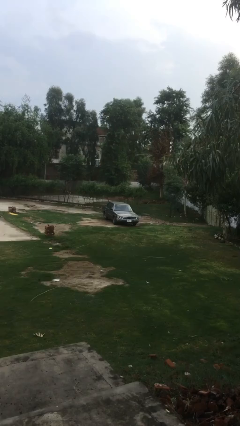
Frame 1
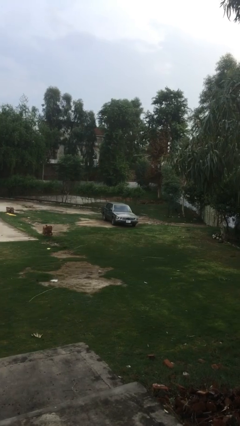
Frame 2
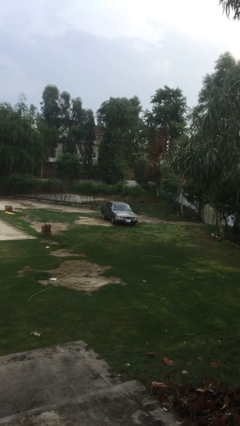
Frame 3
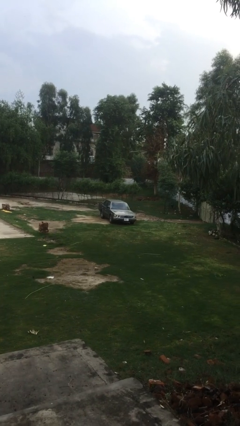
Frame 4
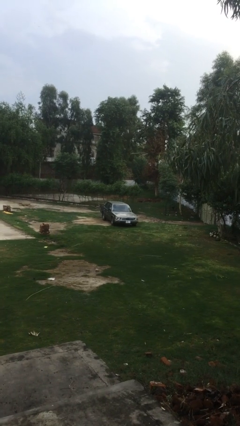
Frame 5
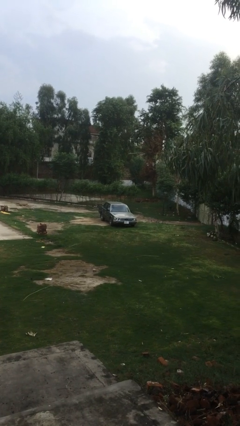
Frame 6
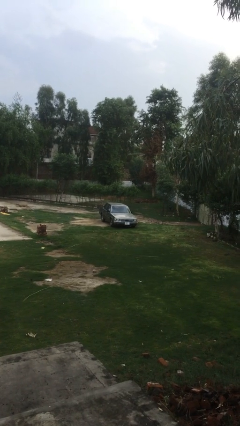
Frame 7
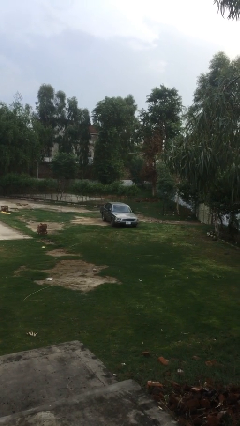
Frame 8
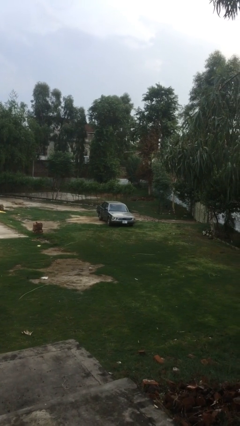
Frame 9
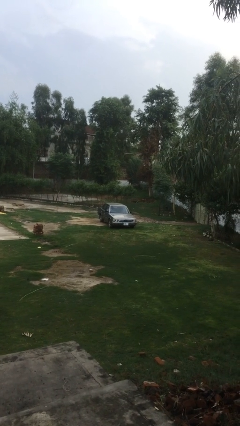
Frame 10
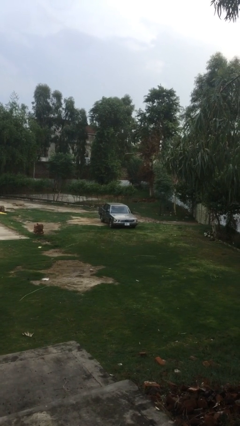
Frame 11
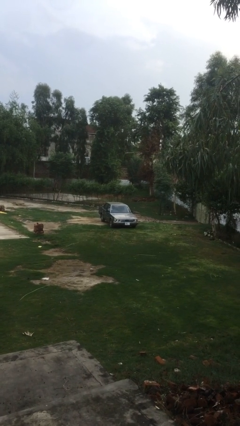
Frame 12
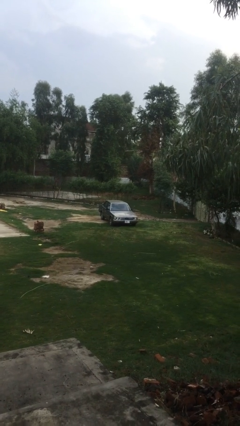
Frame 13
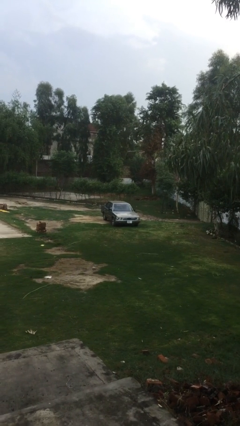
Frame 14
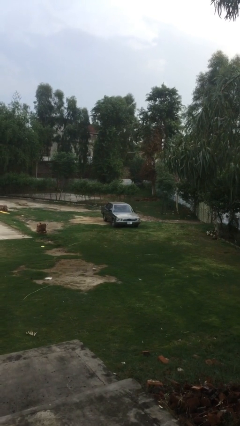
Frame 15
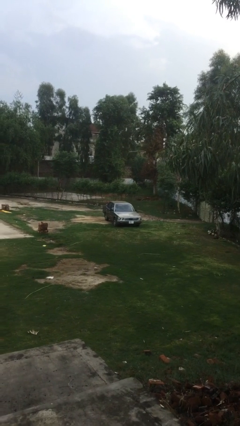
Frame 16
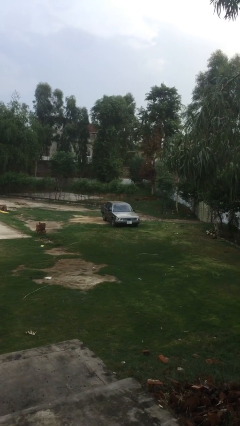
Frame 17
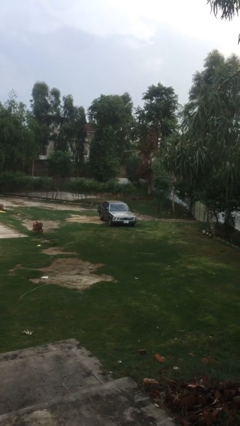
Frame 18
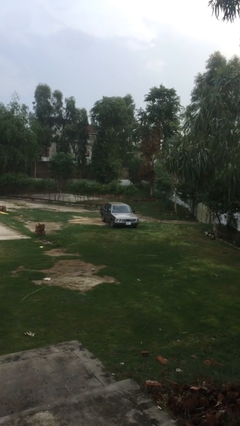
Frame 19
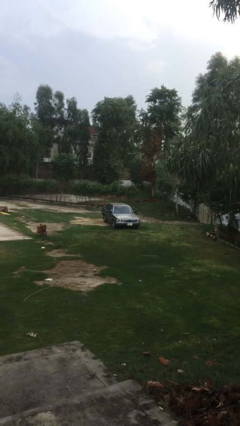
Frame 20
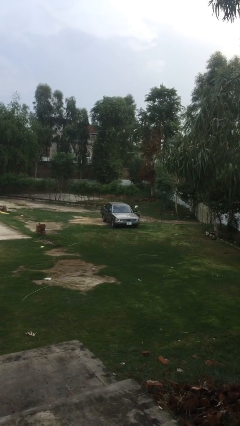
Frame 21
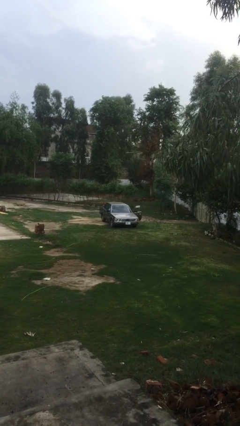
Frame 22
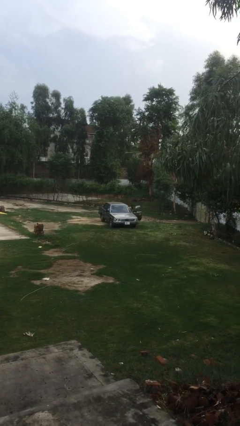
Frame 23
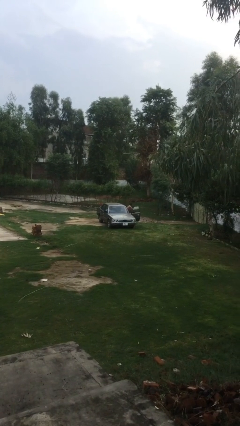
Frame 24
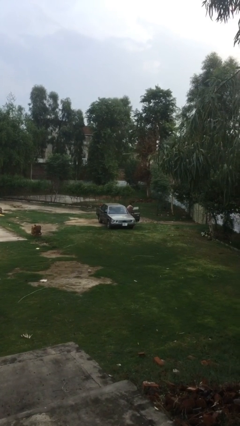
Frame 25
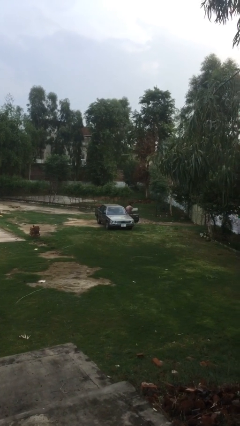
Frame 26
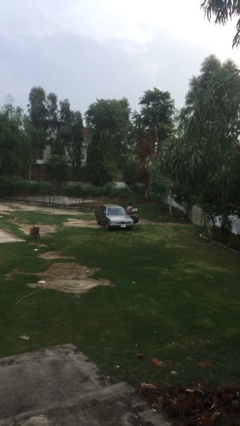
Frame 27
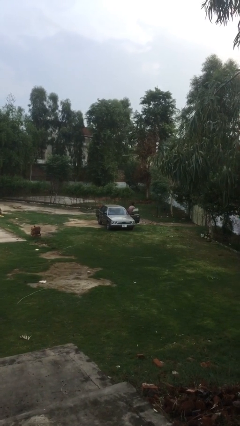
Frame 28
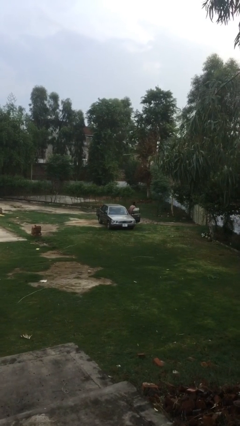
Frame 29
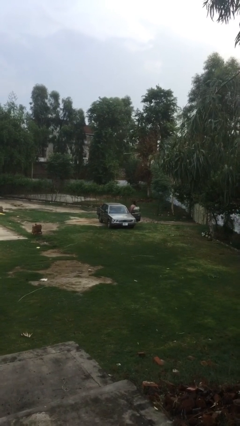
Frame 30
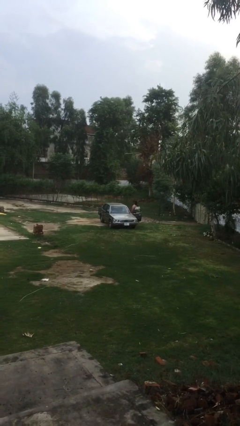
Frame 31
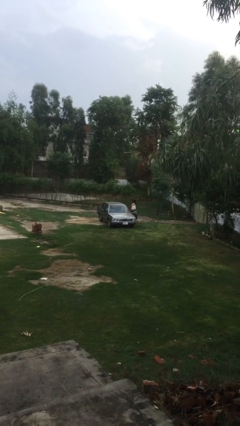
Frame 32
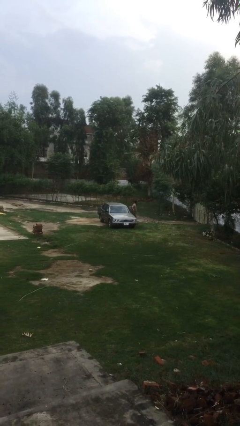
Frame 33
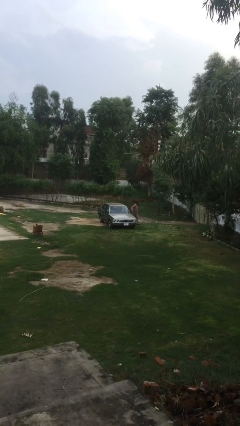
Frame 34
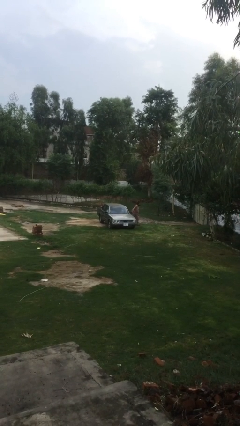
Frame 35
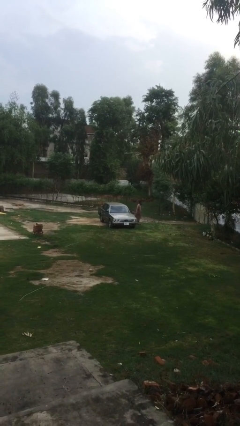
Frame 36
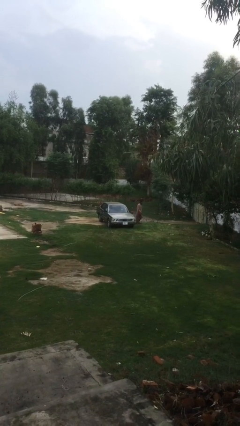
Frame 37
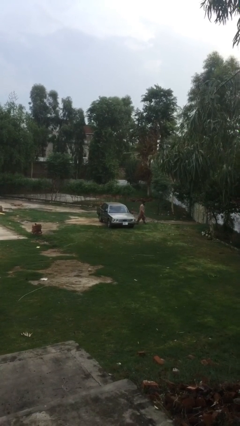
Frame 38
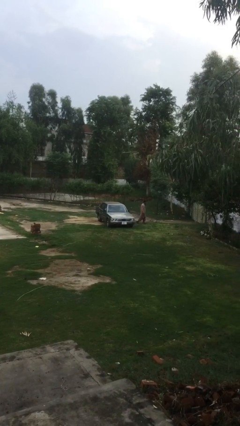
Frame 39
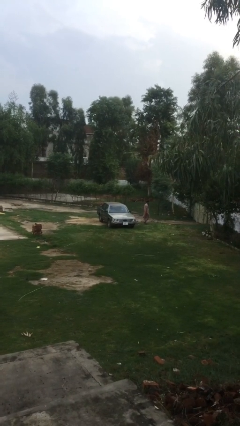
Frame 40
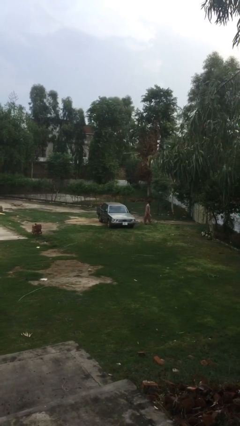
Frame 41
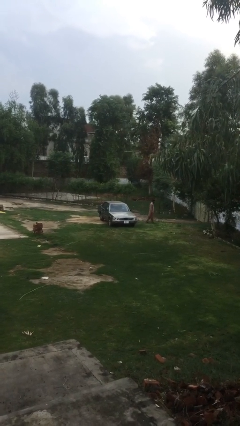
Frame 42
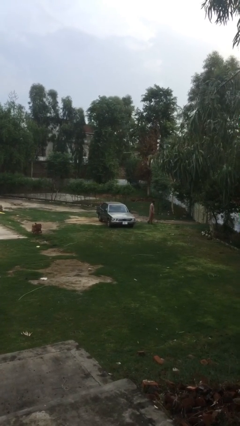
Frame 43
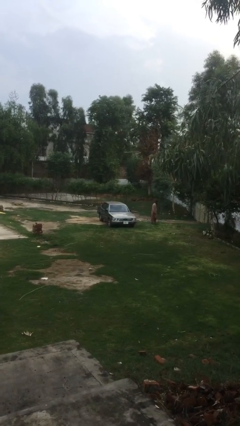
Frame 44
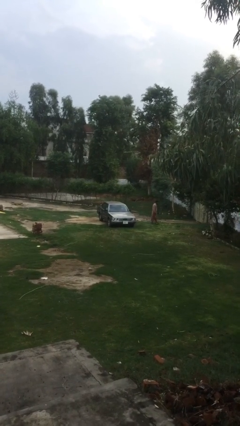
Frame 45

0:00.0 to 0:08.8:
car drops off person

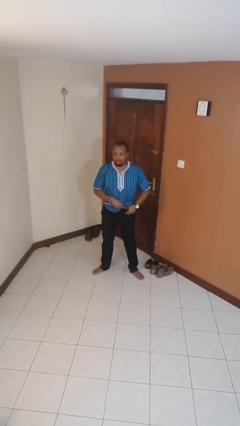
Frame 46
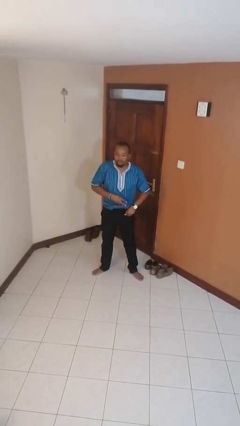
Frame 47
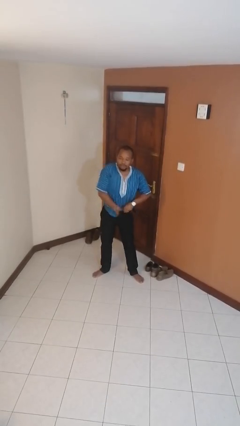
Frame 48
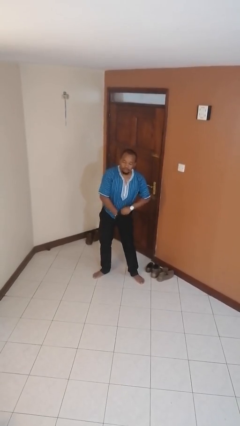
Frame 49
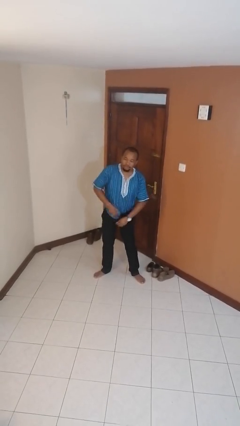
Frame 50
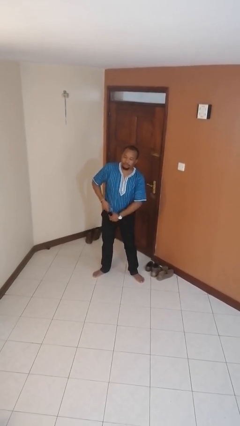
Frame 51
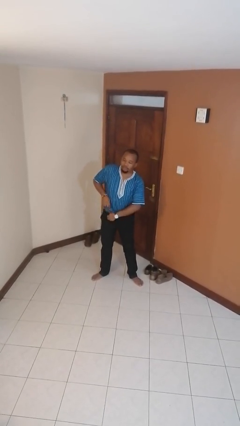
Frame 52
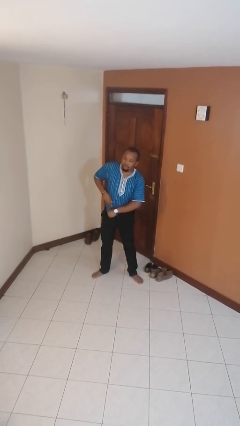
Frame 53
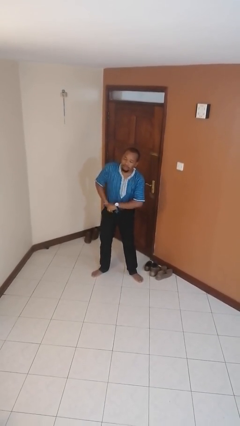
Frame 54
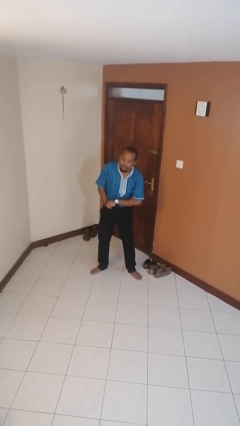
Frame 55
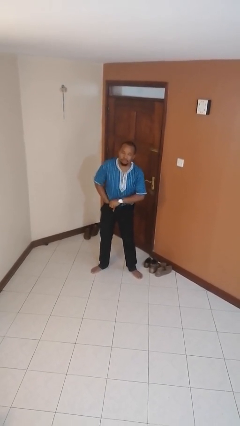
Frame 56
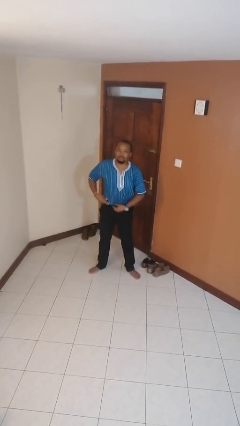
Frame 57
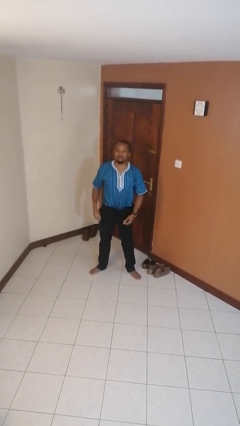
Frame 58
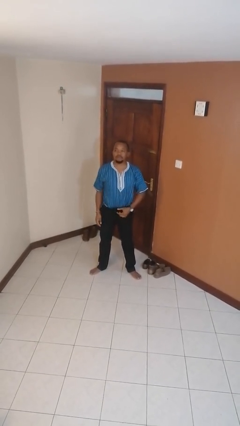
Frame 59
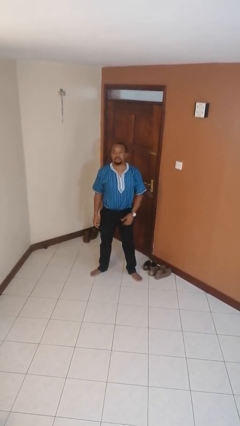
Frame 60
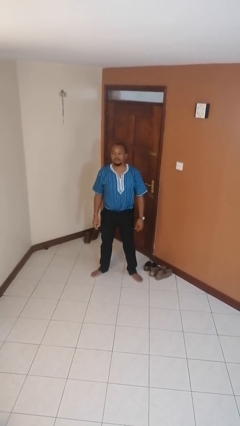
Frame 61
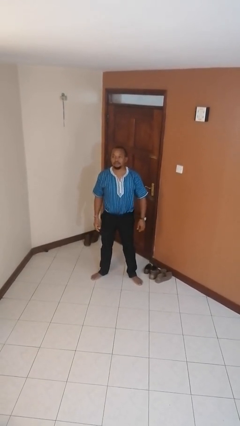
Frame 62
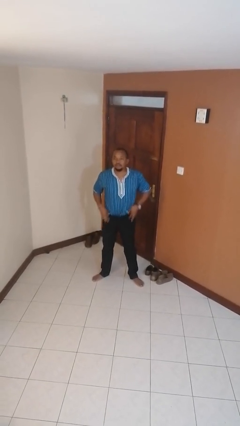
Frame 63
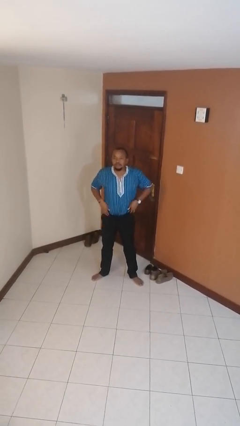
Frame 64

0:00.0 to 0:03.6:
person tucks in shirt

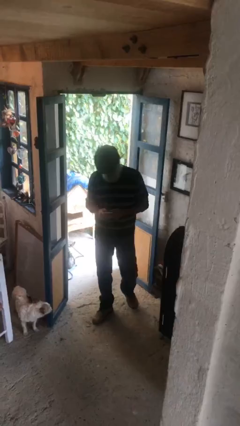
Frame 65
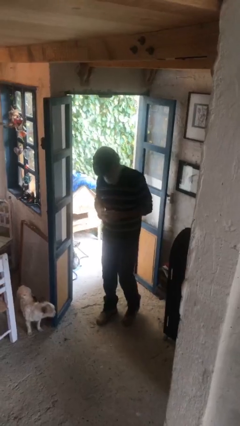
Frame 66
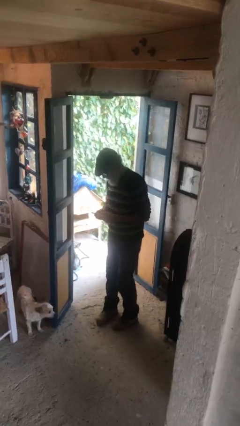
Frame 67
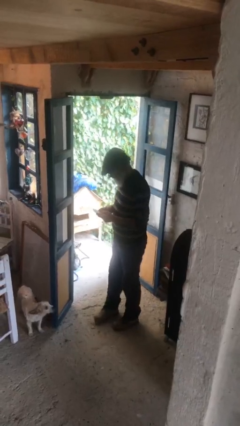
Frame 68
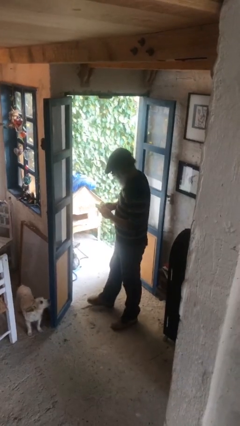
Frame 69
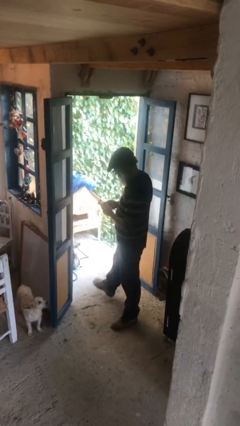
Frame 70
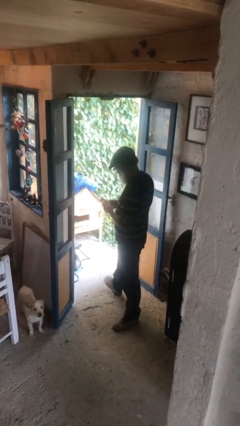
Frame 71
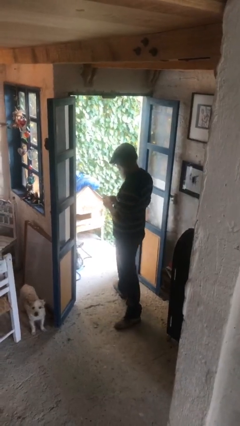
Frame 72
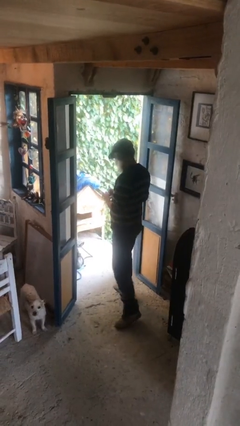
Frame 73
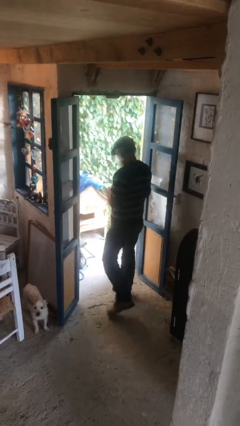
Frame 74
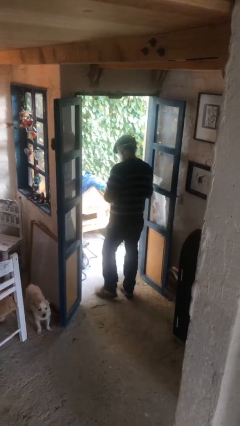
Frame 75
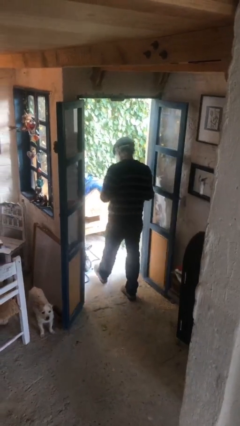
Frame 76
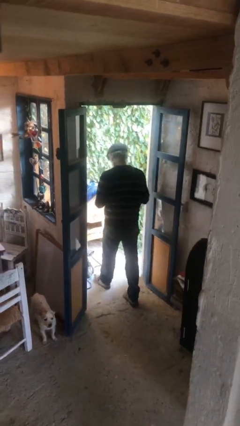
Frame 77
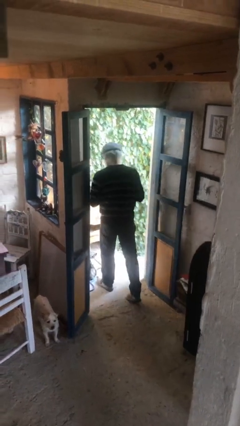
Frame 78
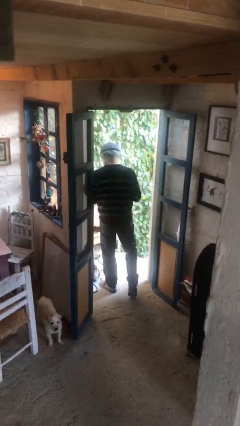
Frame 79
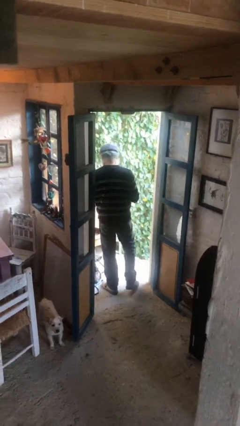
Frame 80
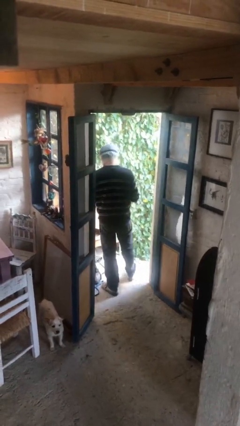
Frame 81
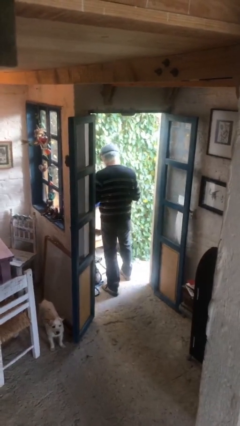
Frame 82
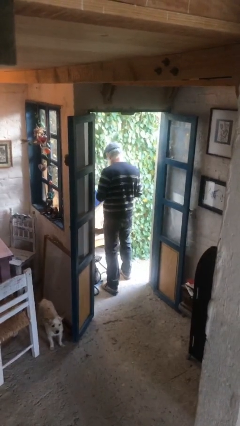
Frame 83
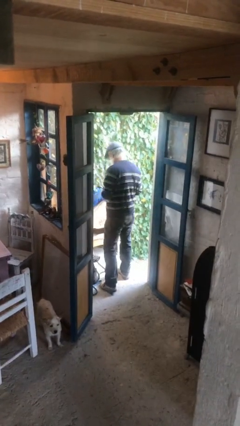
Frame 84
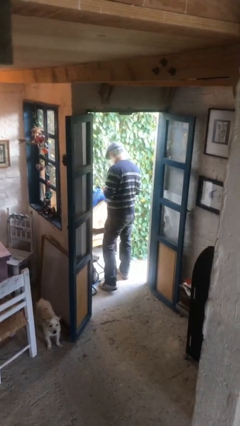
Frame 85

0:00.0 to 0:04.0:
person exits scene through structure

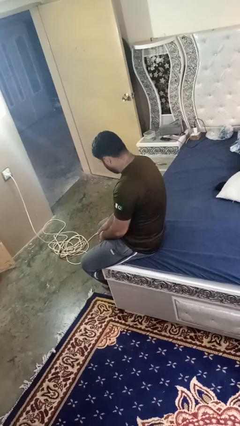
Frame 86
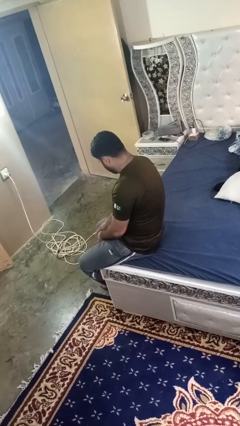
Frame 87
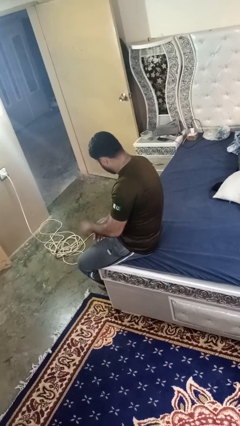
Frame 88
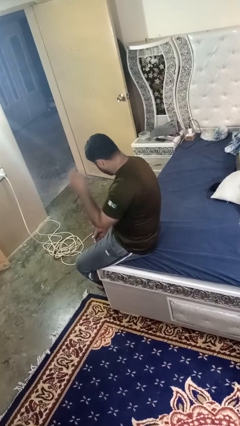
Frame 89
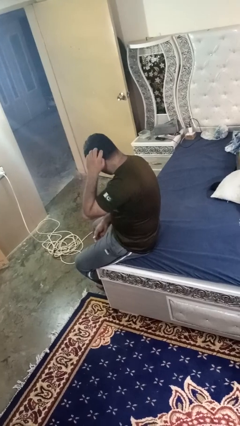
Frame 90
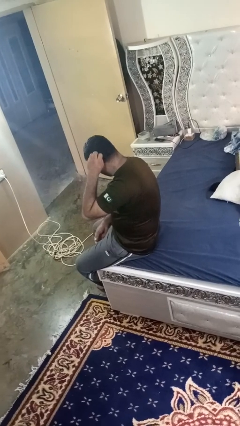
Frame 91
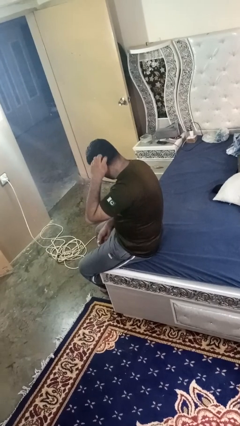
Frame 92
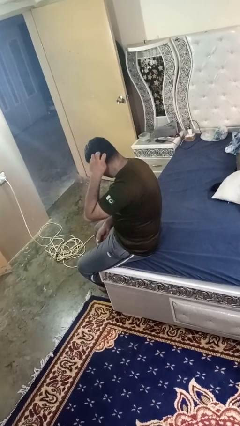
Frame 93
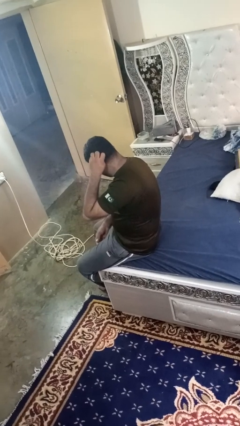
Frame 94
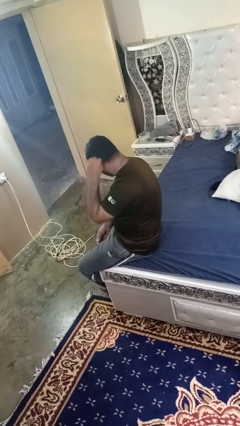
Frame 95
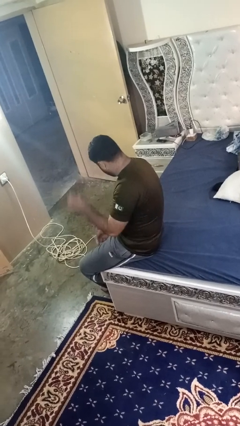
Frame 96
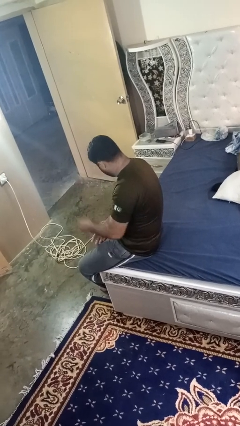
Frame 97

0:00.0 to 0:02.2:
person strokes hair
